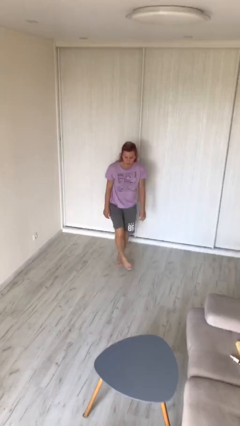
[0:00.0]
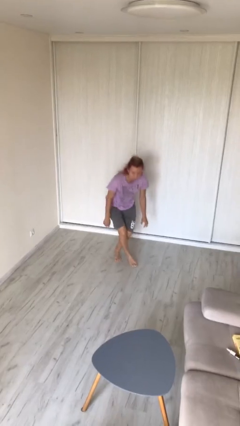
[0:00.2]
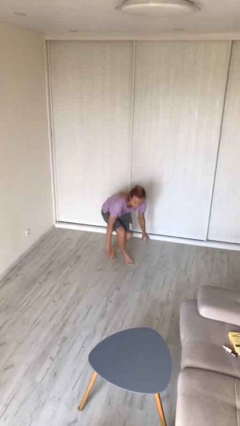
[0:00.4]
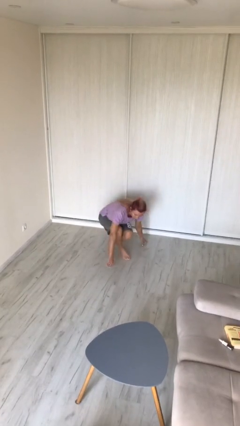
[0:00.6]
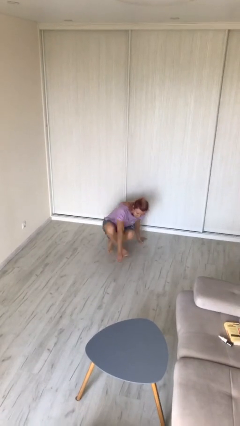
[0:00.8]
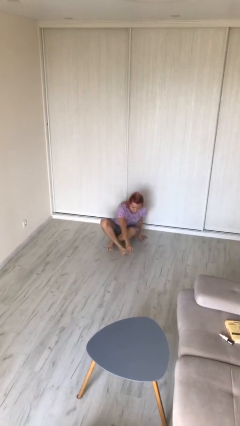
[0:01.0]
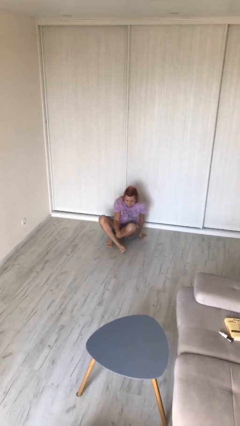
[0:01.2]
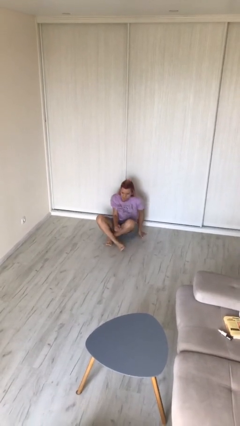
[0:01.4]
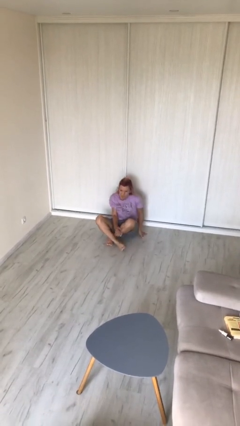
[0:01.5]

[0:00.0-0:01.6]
person sits crisscross

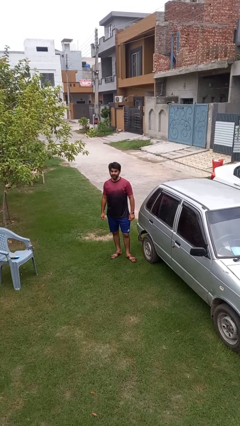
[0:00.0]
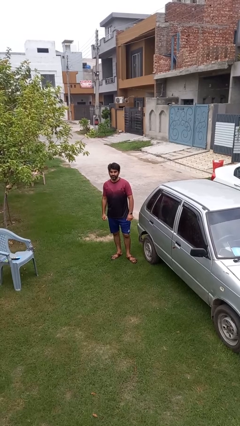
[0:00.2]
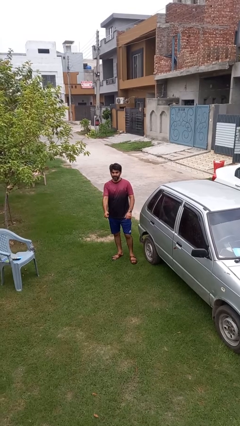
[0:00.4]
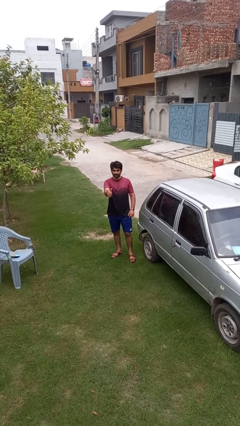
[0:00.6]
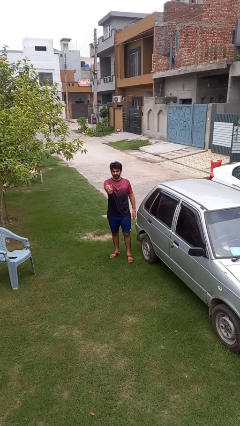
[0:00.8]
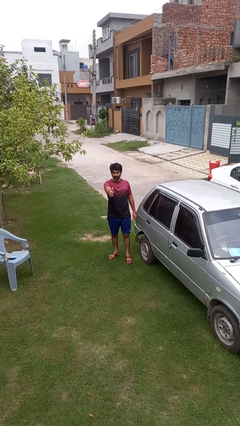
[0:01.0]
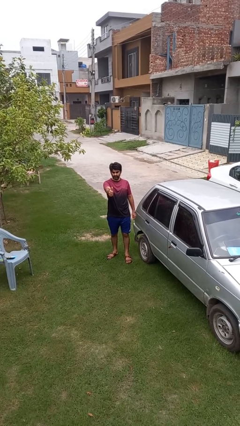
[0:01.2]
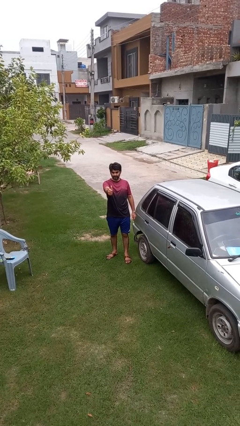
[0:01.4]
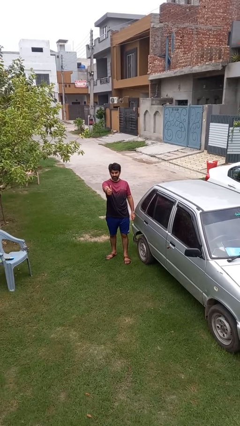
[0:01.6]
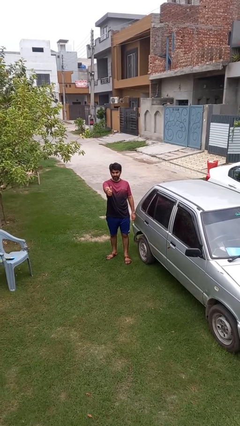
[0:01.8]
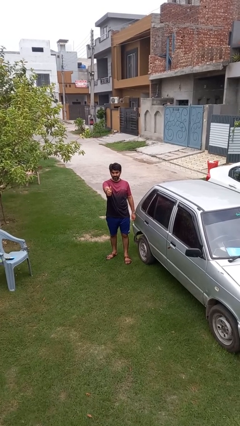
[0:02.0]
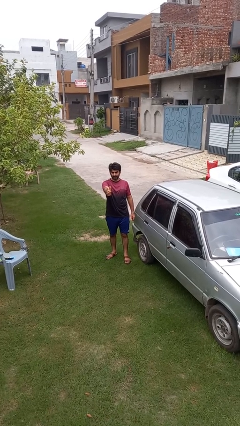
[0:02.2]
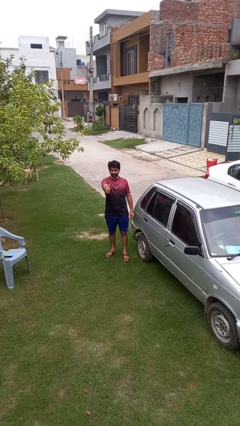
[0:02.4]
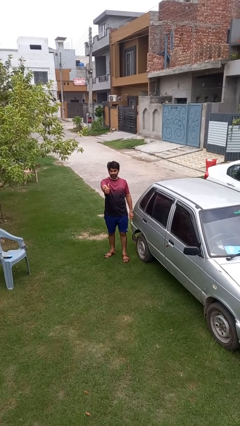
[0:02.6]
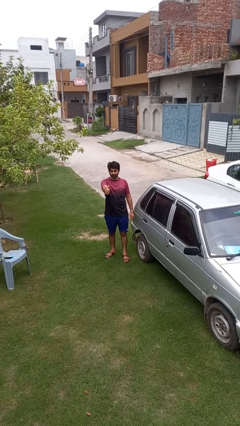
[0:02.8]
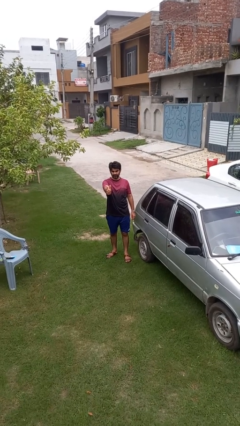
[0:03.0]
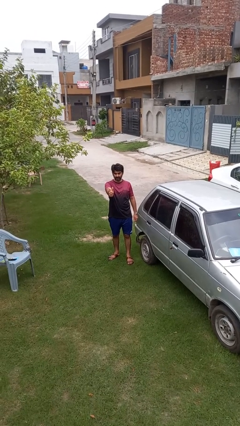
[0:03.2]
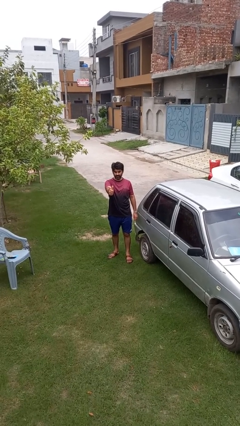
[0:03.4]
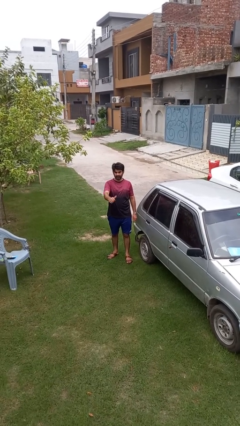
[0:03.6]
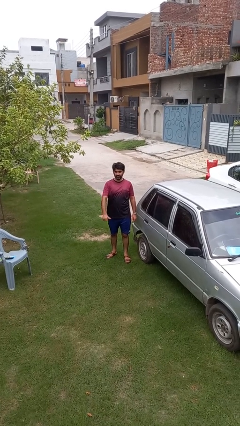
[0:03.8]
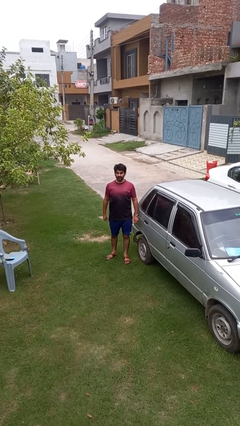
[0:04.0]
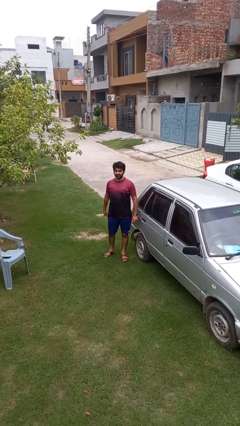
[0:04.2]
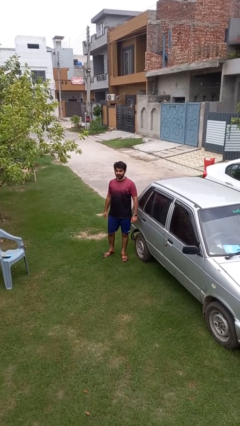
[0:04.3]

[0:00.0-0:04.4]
person gestures thumbs up

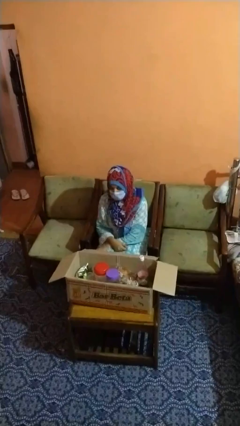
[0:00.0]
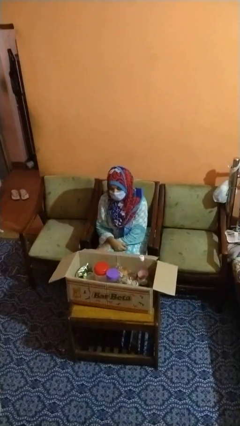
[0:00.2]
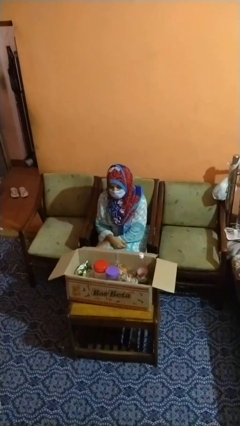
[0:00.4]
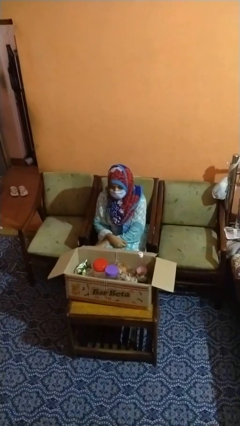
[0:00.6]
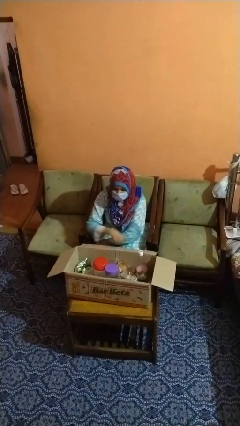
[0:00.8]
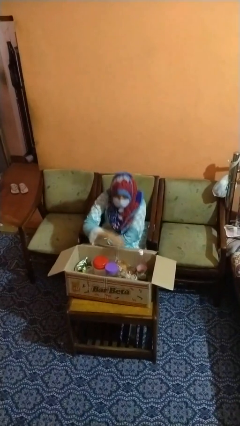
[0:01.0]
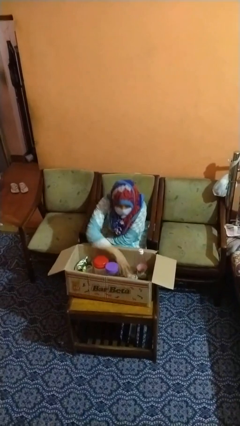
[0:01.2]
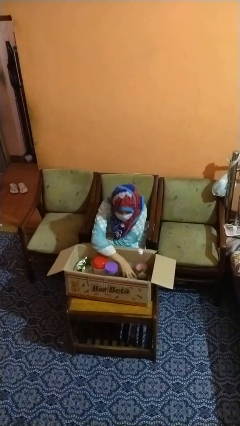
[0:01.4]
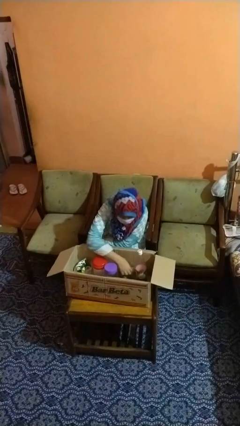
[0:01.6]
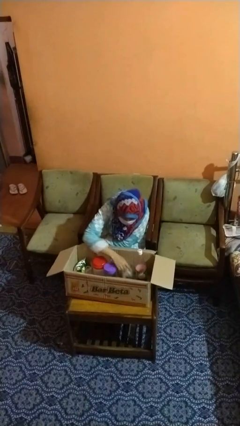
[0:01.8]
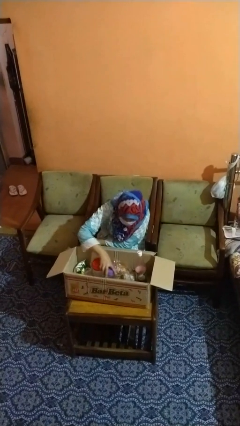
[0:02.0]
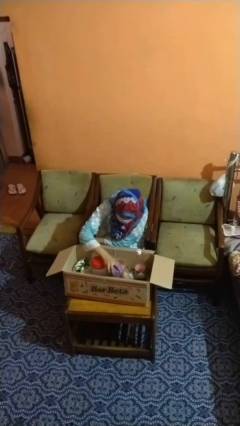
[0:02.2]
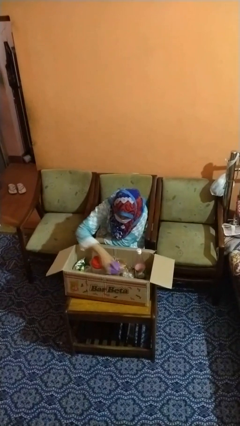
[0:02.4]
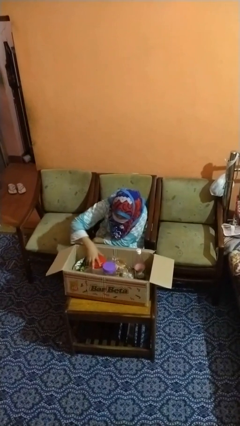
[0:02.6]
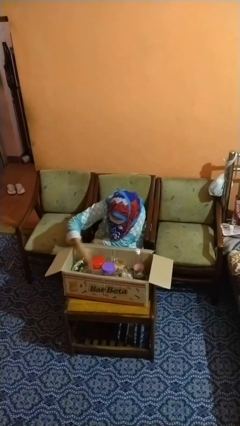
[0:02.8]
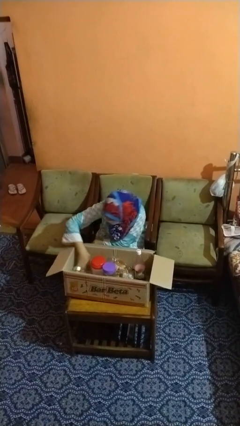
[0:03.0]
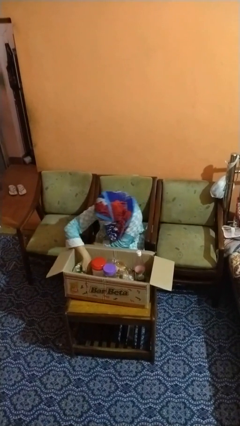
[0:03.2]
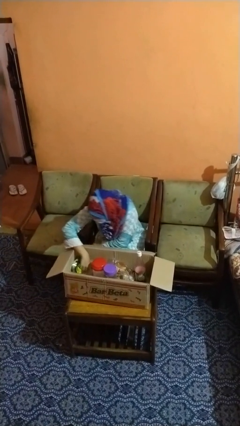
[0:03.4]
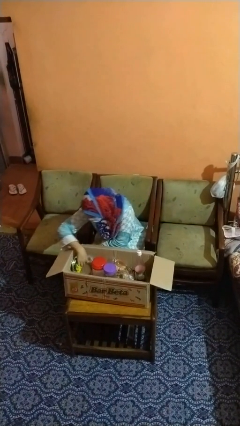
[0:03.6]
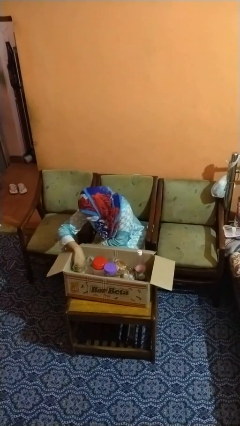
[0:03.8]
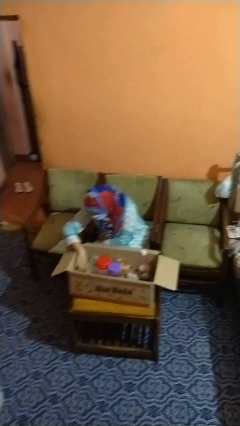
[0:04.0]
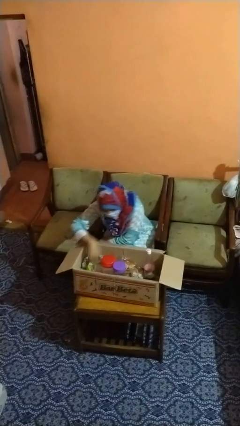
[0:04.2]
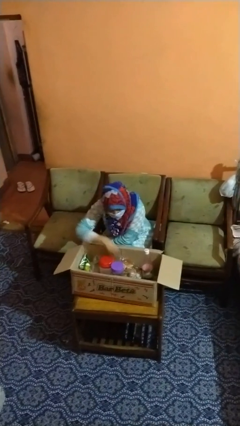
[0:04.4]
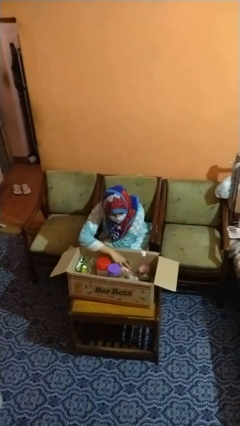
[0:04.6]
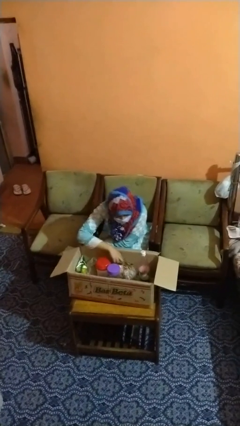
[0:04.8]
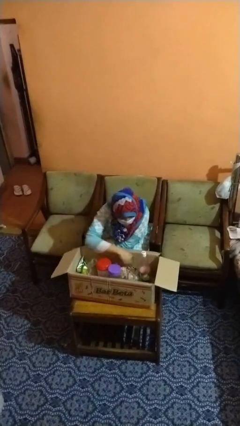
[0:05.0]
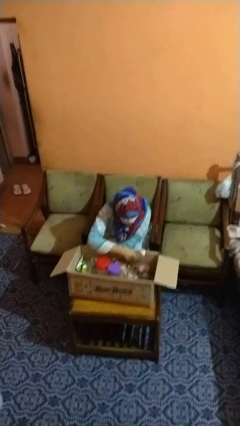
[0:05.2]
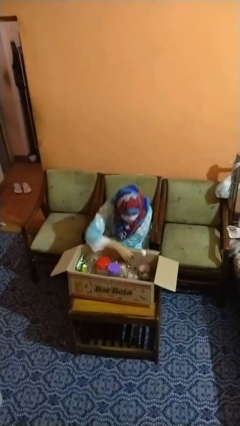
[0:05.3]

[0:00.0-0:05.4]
person searches in box

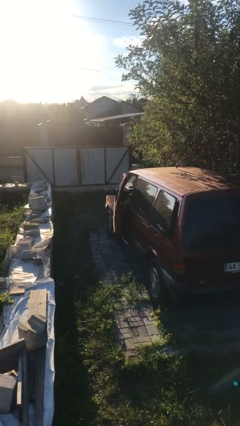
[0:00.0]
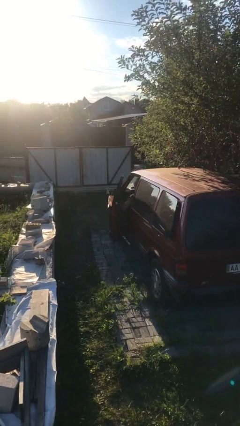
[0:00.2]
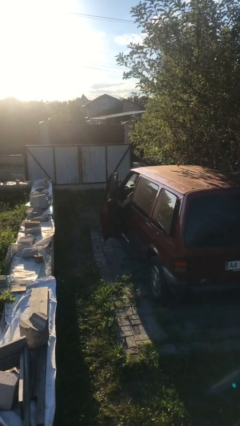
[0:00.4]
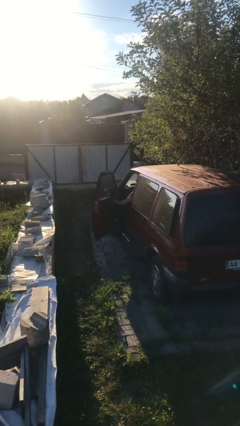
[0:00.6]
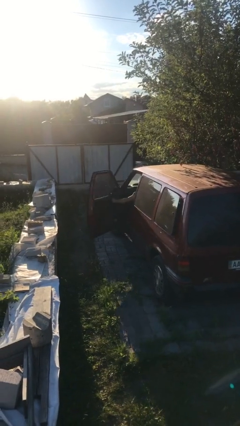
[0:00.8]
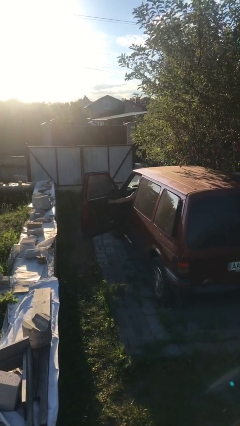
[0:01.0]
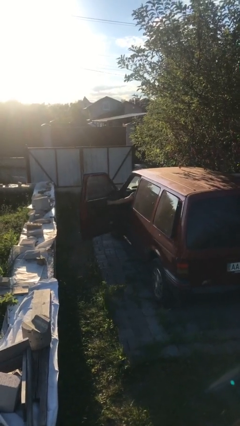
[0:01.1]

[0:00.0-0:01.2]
person opens car door

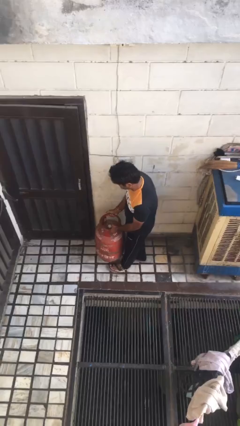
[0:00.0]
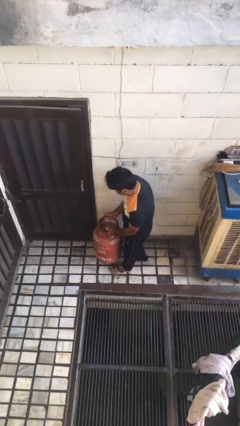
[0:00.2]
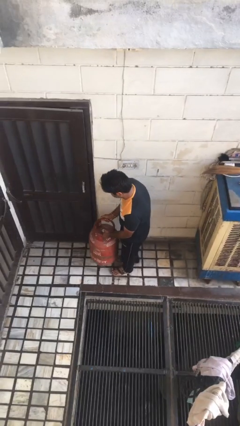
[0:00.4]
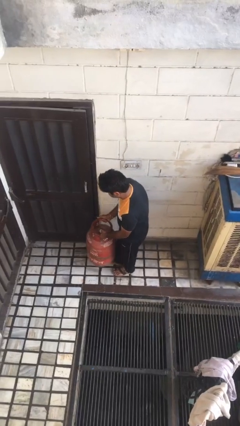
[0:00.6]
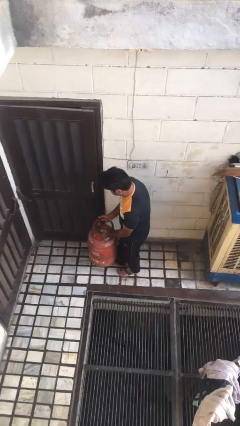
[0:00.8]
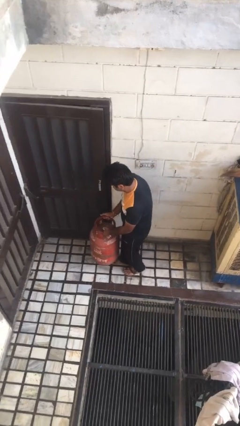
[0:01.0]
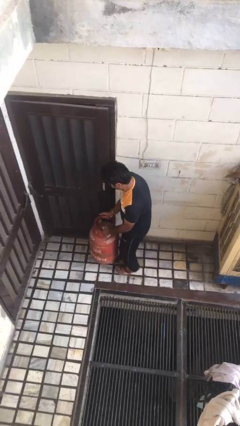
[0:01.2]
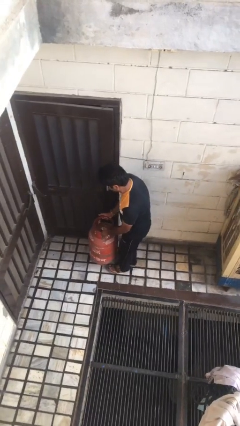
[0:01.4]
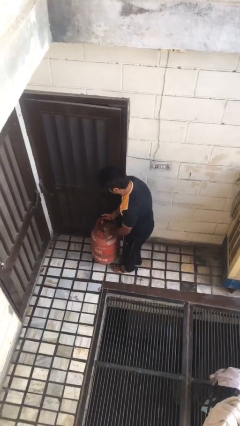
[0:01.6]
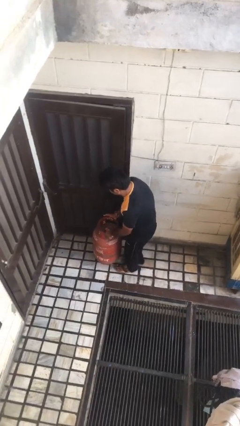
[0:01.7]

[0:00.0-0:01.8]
person carries heavy object

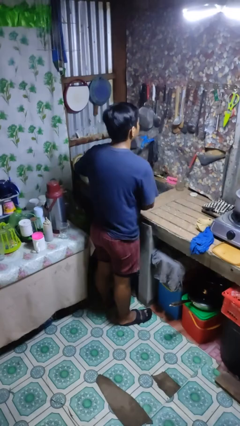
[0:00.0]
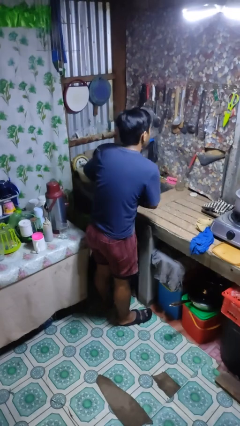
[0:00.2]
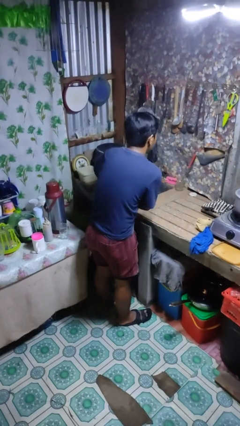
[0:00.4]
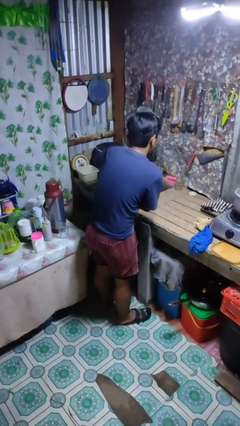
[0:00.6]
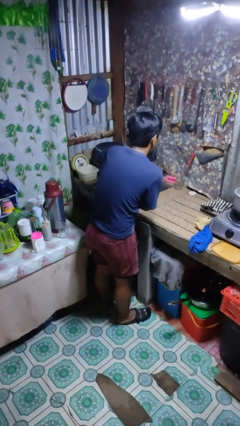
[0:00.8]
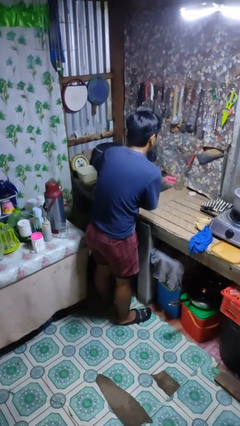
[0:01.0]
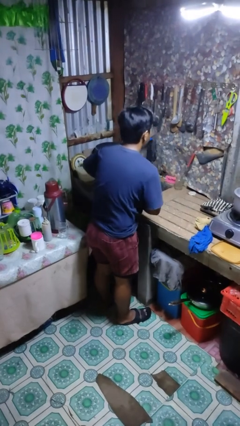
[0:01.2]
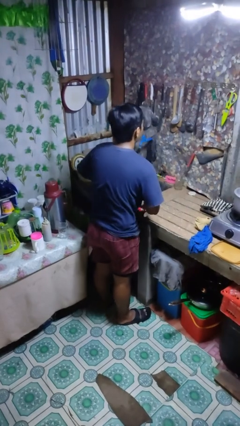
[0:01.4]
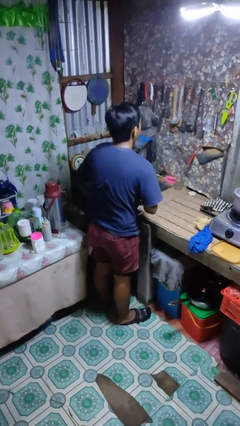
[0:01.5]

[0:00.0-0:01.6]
person applies deodorant

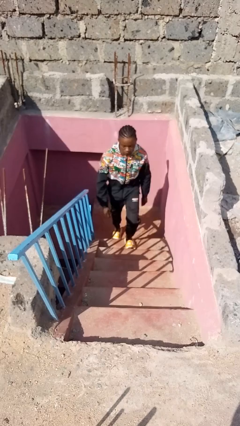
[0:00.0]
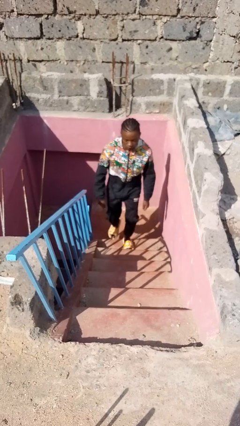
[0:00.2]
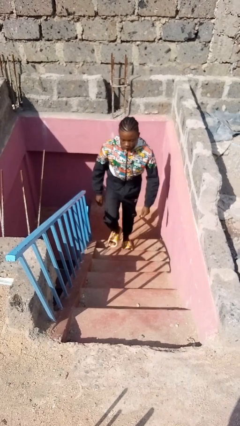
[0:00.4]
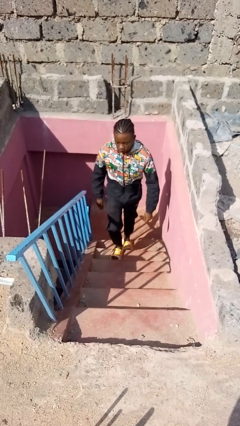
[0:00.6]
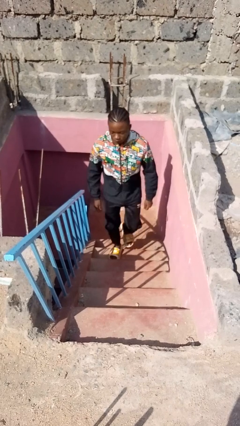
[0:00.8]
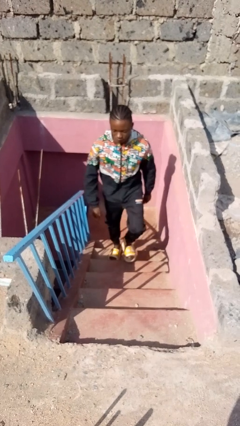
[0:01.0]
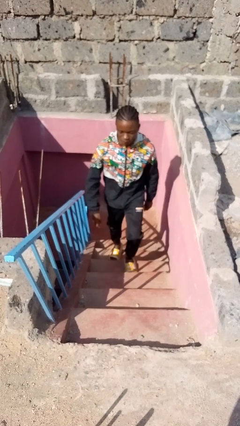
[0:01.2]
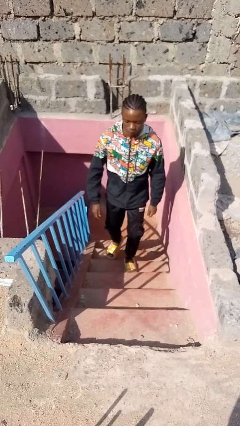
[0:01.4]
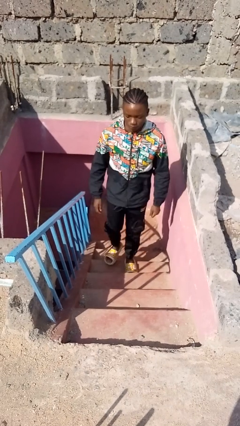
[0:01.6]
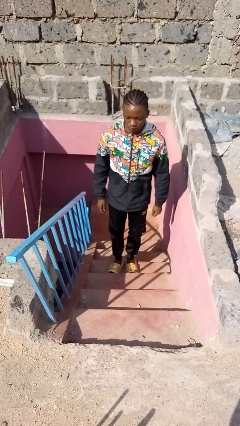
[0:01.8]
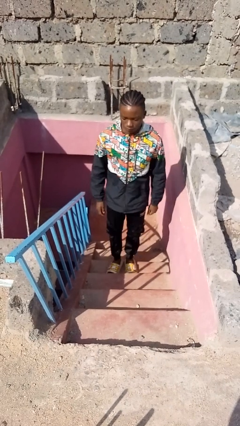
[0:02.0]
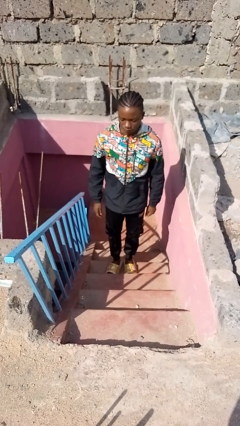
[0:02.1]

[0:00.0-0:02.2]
person climbs up stairs
